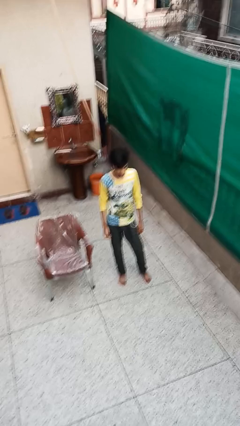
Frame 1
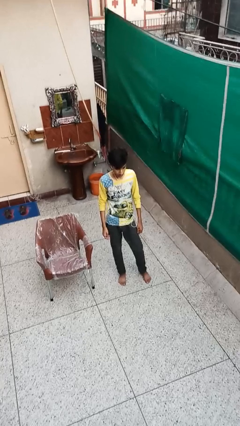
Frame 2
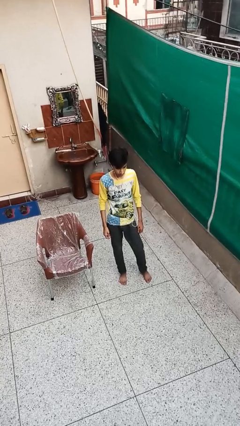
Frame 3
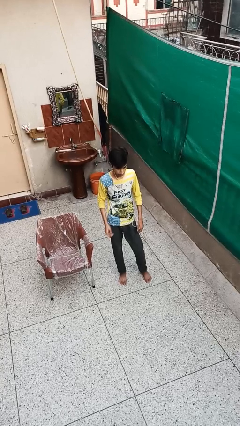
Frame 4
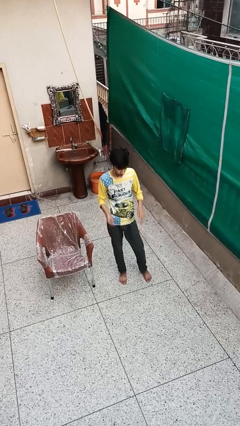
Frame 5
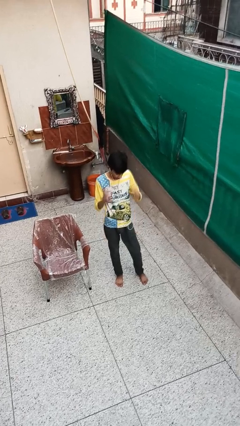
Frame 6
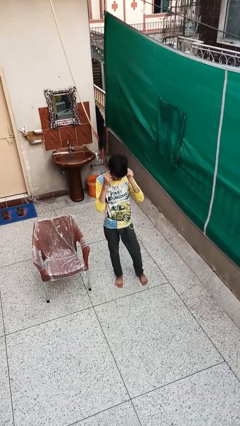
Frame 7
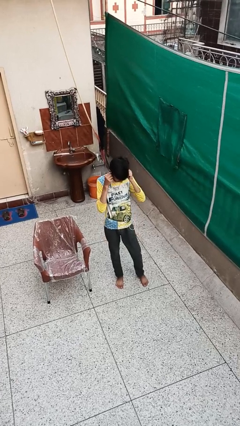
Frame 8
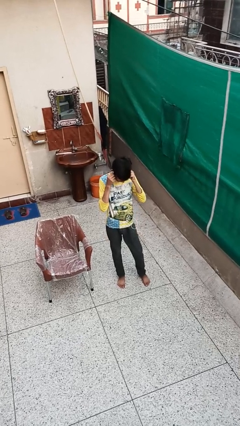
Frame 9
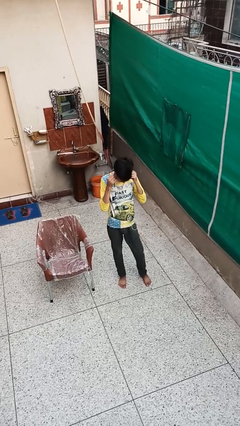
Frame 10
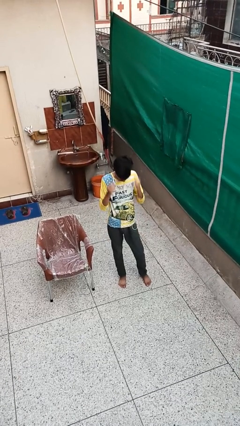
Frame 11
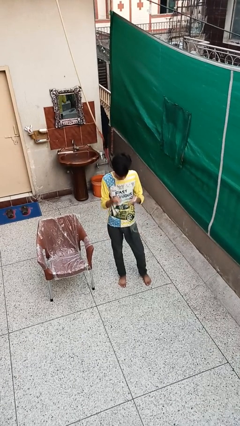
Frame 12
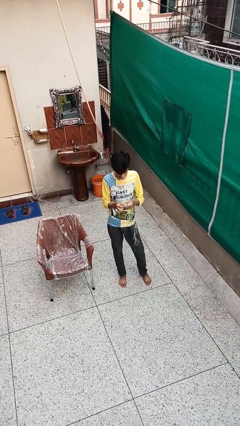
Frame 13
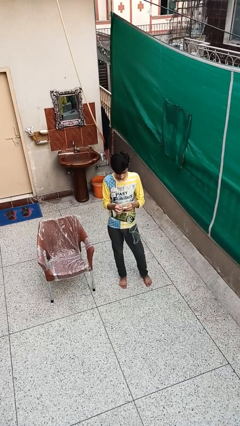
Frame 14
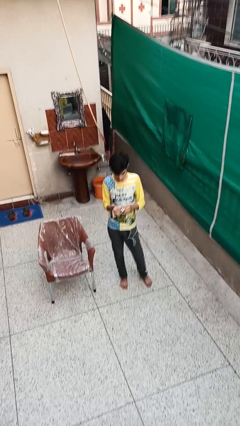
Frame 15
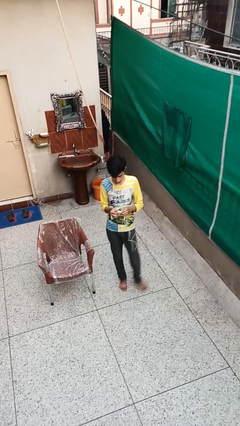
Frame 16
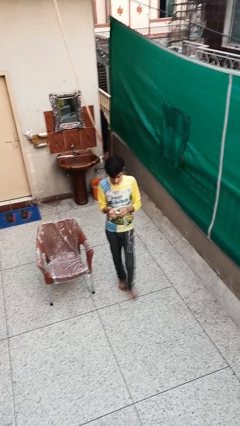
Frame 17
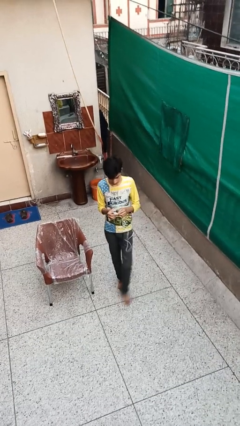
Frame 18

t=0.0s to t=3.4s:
person takes off headphones

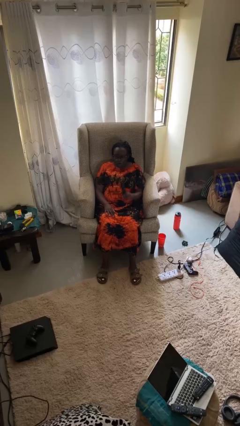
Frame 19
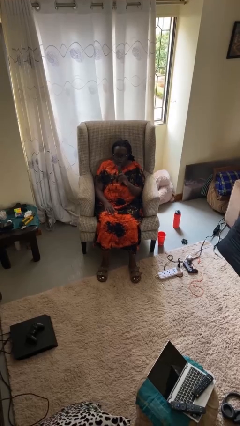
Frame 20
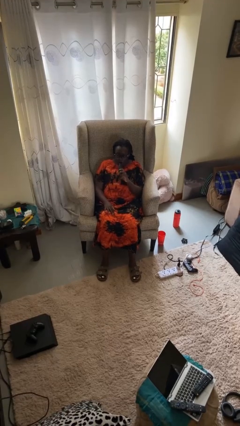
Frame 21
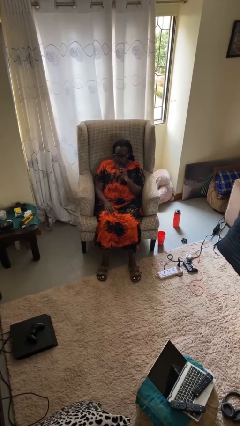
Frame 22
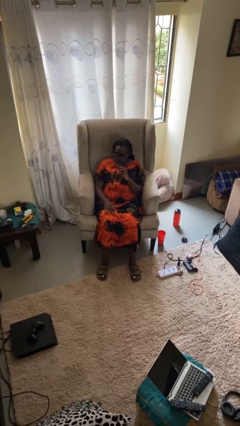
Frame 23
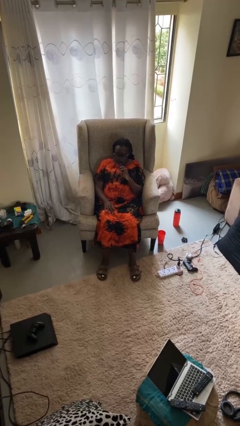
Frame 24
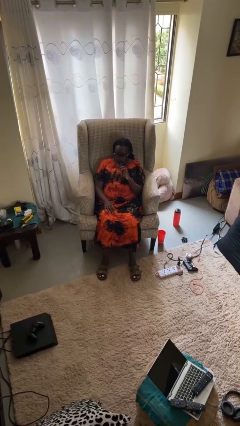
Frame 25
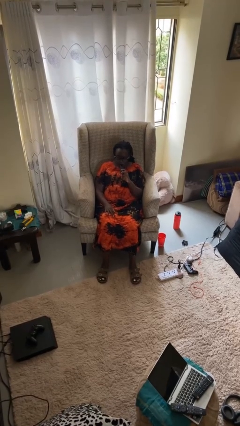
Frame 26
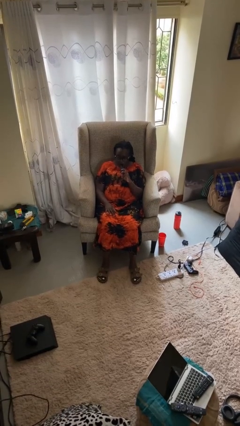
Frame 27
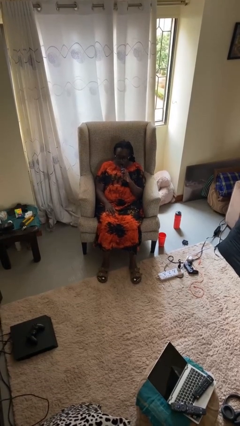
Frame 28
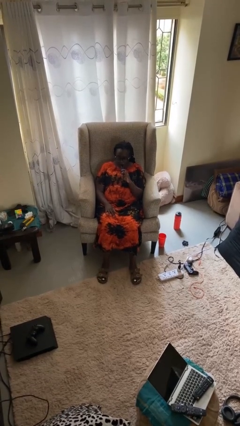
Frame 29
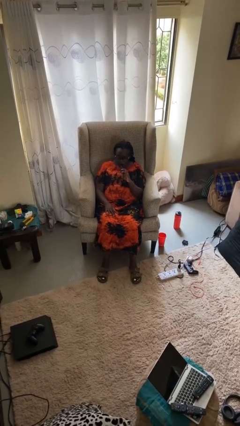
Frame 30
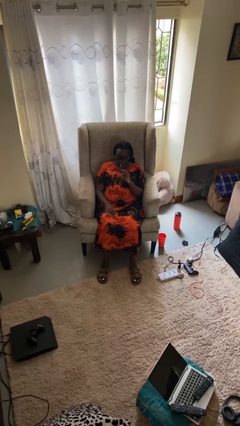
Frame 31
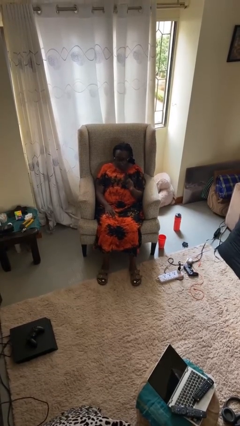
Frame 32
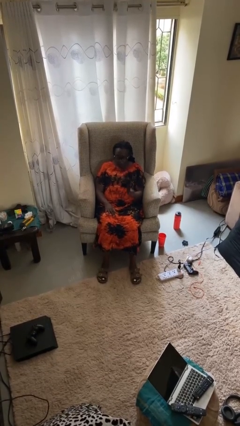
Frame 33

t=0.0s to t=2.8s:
person vapes

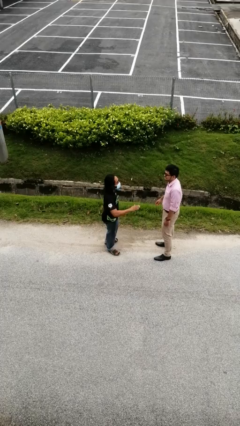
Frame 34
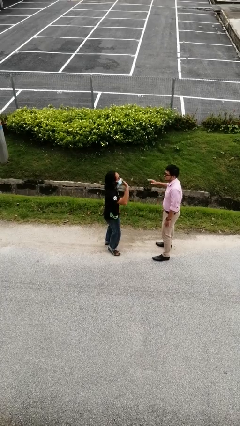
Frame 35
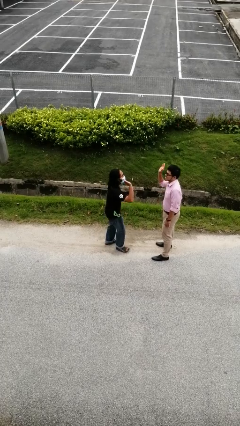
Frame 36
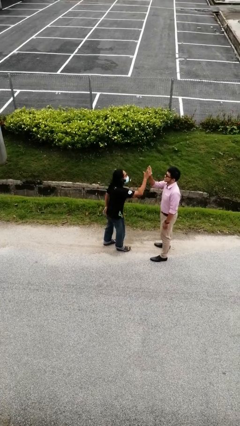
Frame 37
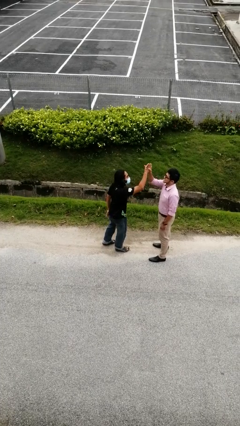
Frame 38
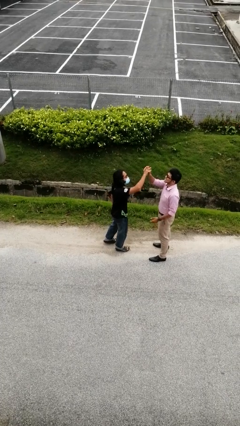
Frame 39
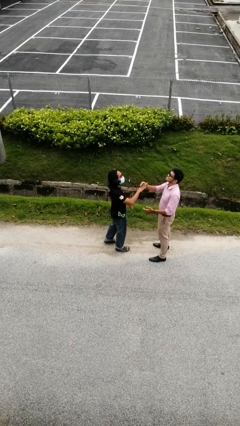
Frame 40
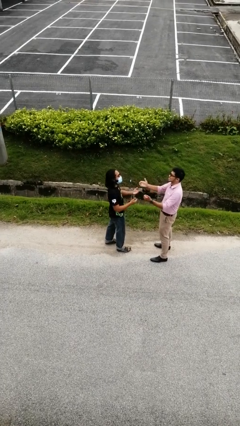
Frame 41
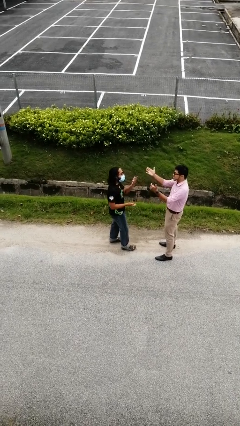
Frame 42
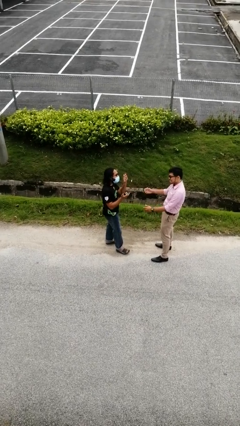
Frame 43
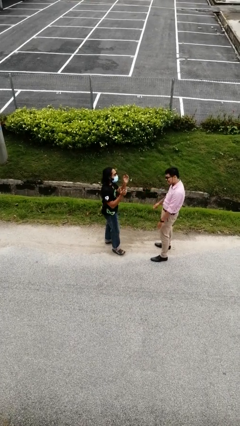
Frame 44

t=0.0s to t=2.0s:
person highfives hand

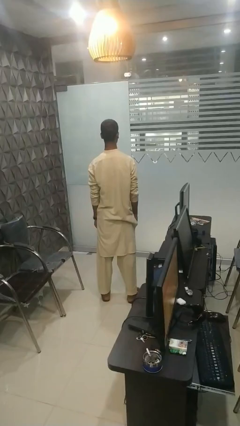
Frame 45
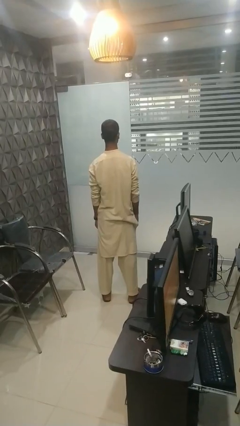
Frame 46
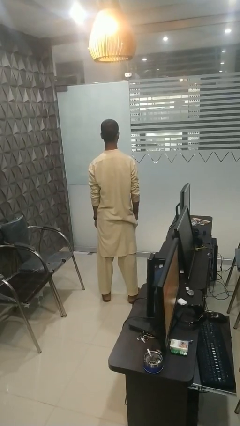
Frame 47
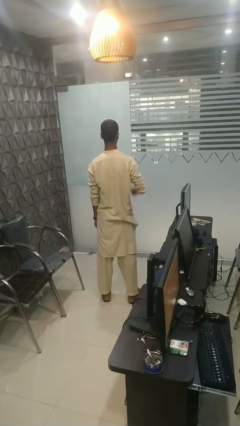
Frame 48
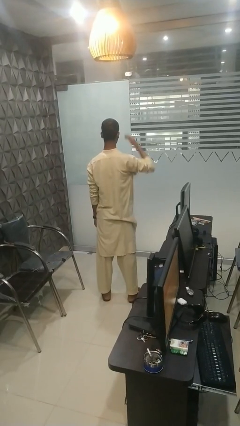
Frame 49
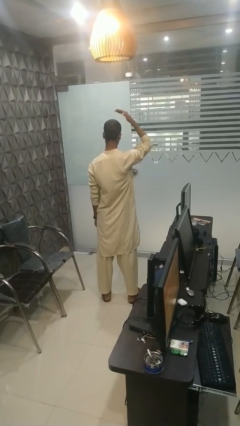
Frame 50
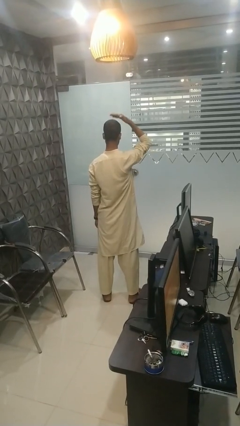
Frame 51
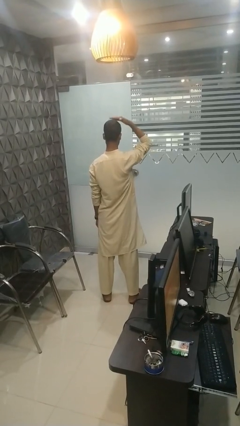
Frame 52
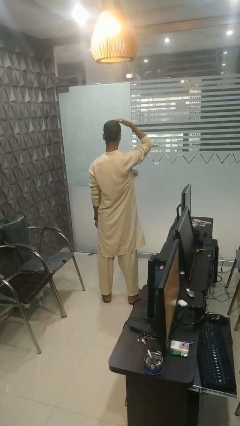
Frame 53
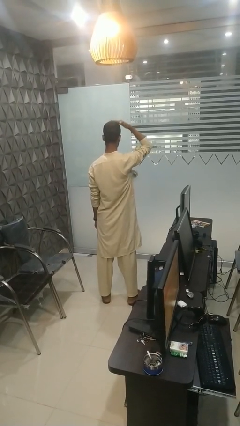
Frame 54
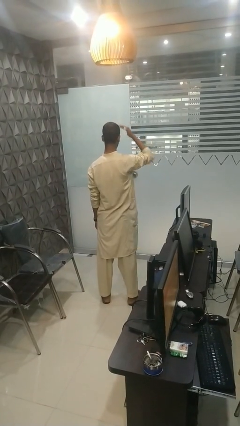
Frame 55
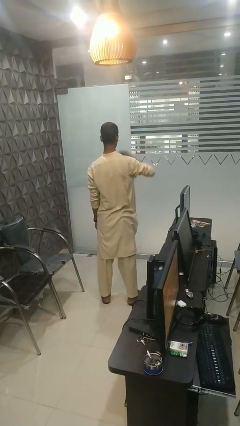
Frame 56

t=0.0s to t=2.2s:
person pats head

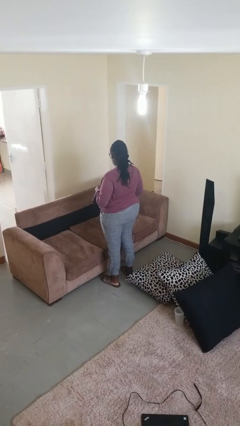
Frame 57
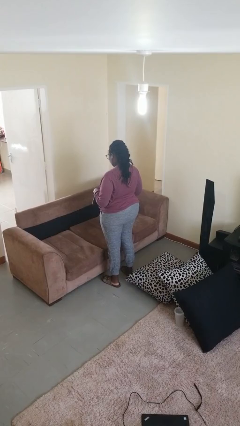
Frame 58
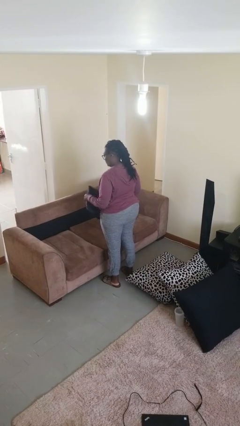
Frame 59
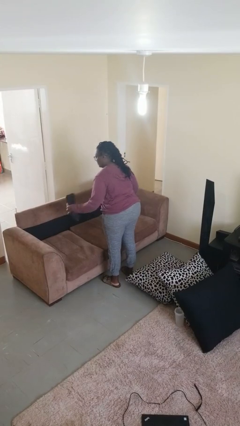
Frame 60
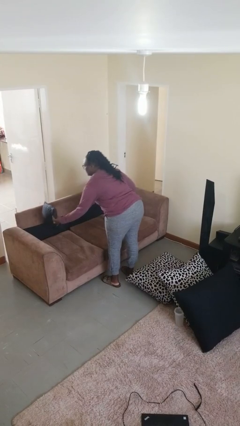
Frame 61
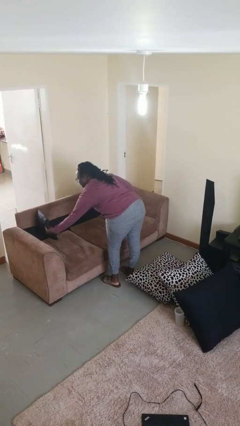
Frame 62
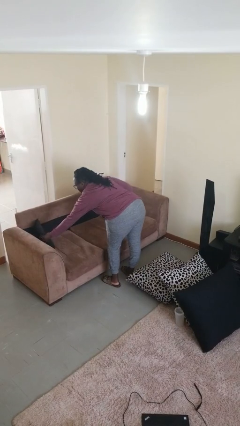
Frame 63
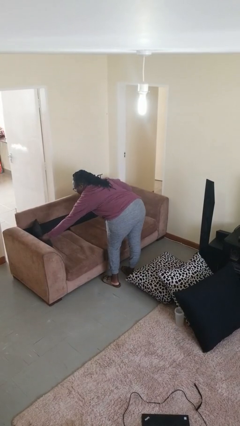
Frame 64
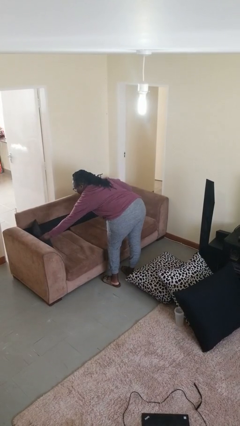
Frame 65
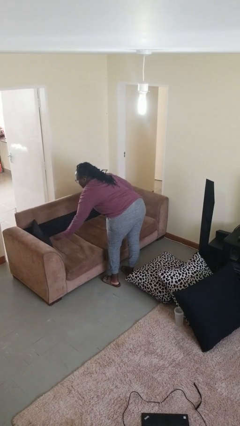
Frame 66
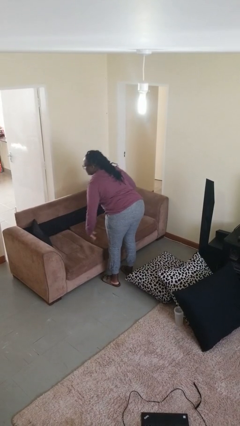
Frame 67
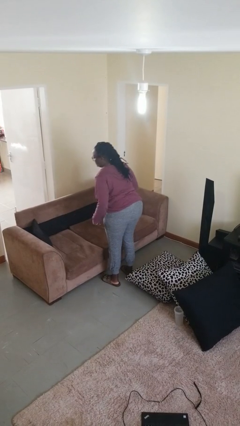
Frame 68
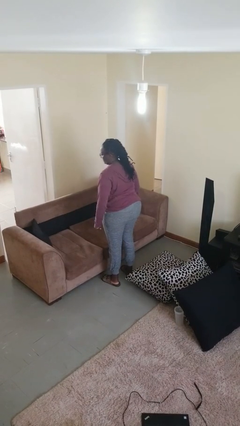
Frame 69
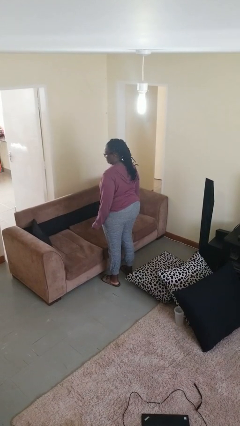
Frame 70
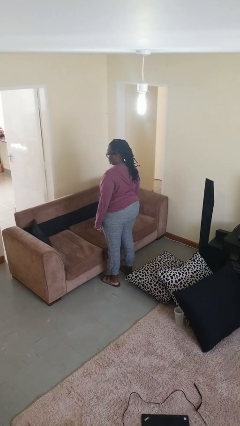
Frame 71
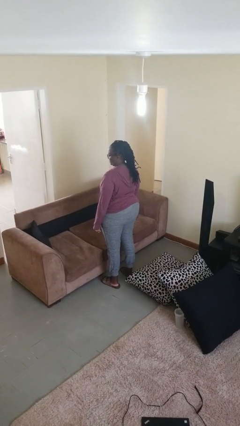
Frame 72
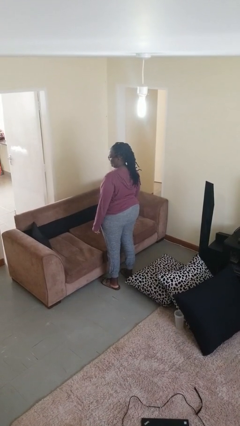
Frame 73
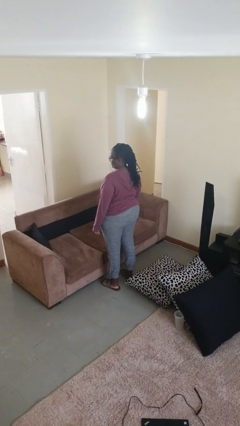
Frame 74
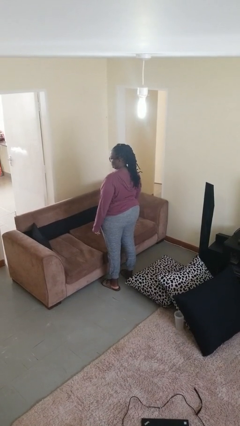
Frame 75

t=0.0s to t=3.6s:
person puts down object on couch

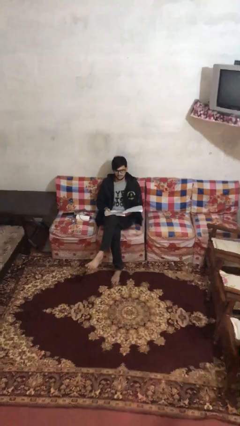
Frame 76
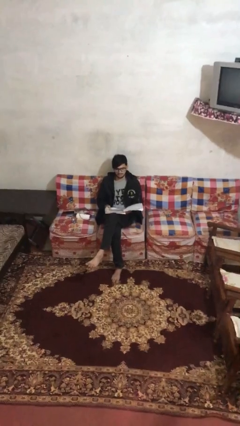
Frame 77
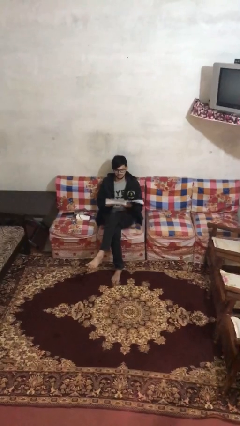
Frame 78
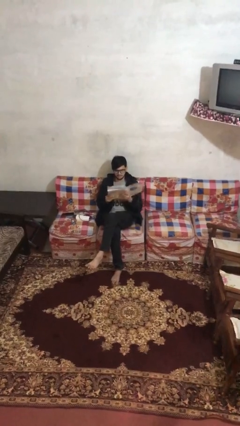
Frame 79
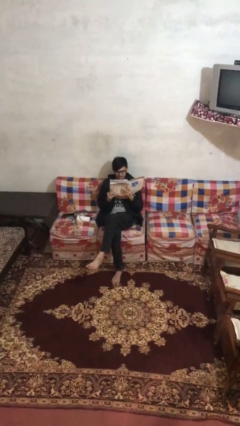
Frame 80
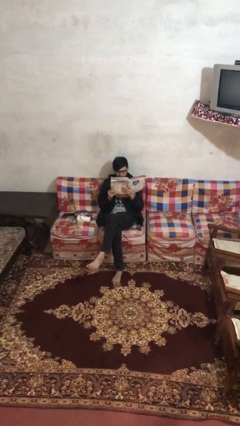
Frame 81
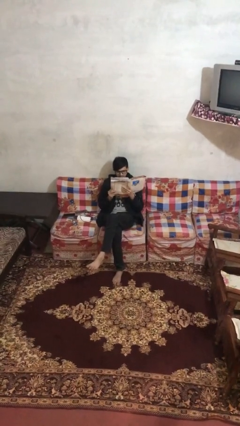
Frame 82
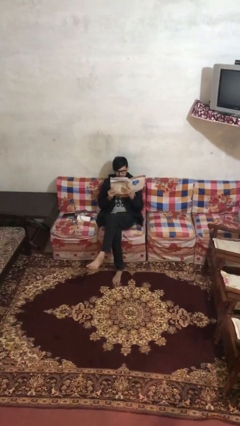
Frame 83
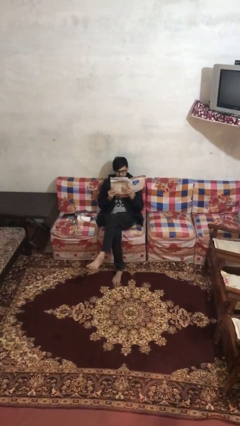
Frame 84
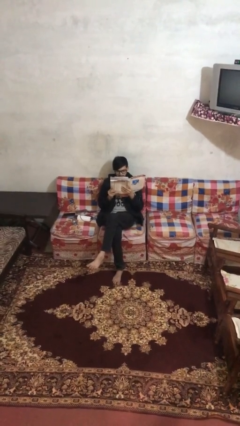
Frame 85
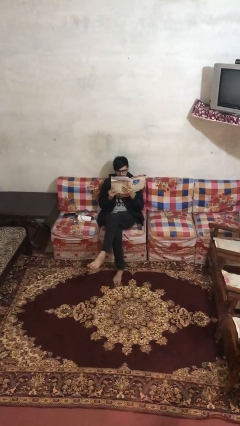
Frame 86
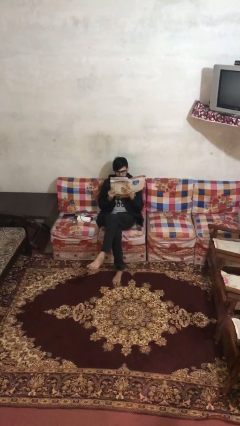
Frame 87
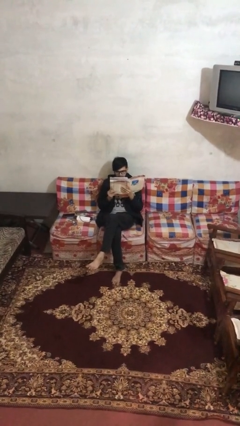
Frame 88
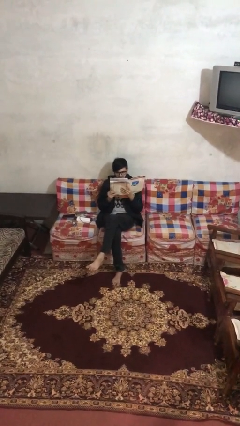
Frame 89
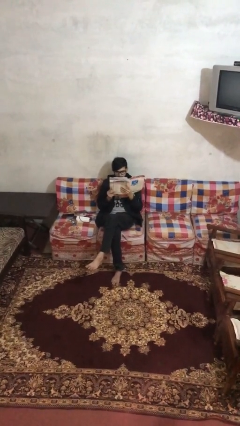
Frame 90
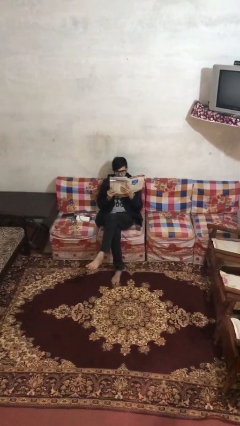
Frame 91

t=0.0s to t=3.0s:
person reads document
